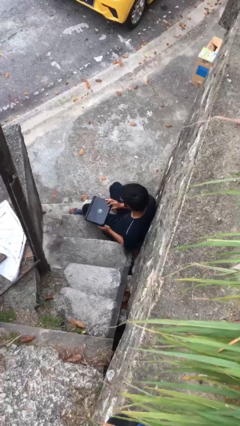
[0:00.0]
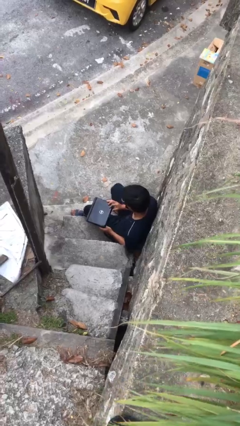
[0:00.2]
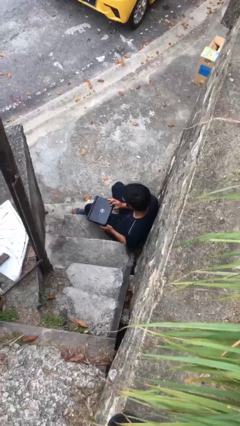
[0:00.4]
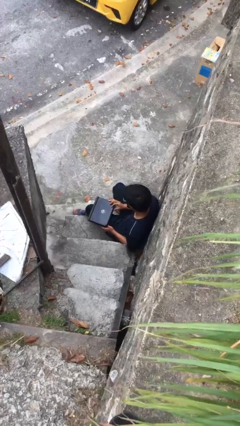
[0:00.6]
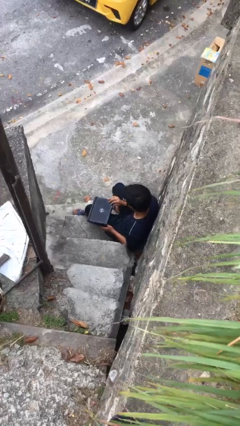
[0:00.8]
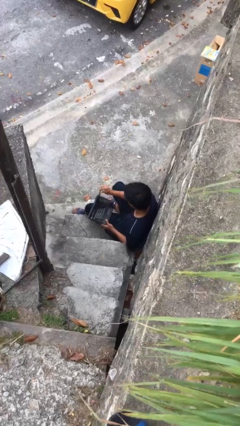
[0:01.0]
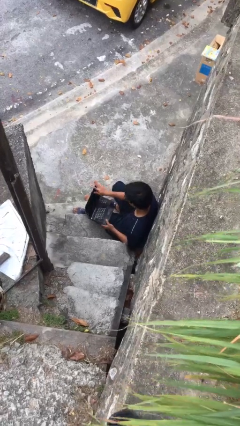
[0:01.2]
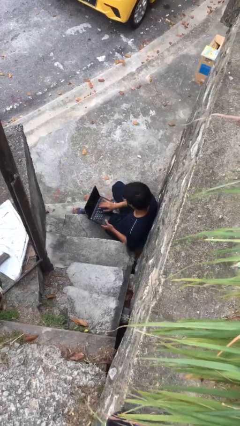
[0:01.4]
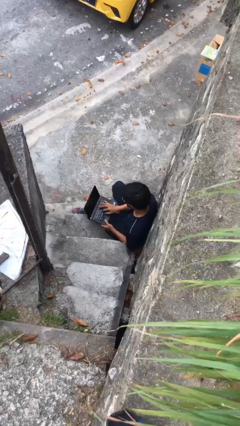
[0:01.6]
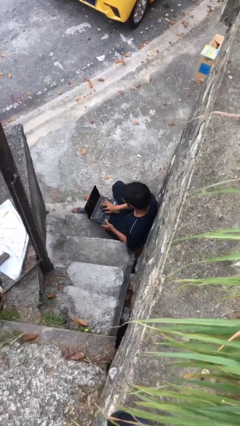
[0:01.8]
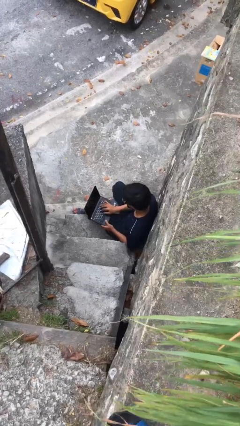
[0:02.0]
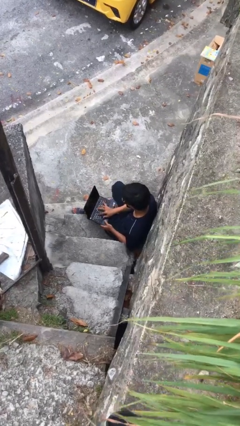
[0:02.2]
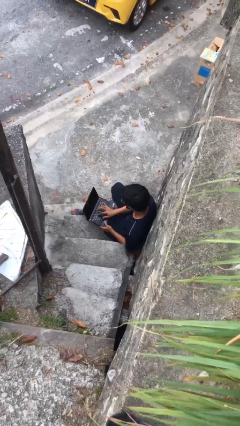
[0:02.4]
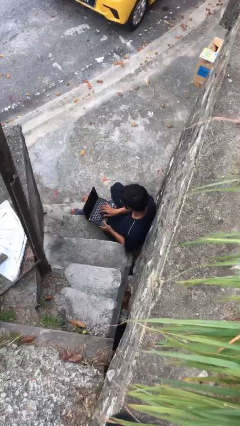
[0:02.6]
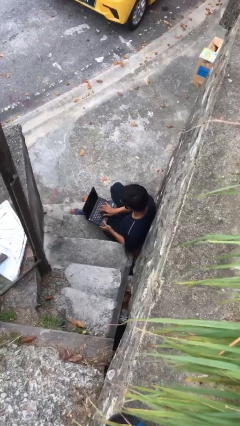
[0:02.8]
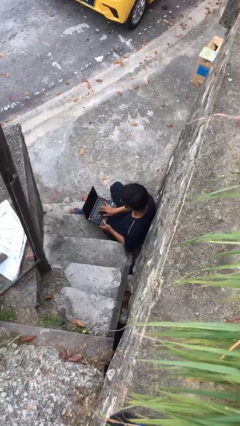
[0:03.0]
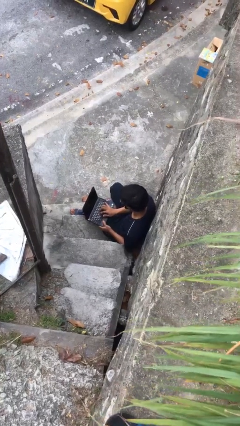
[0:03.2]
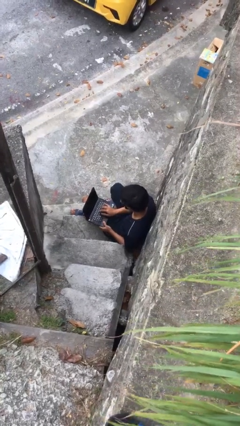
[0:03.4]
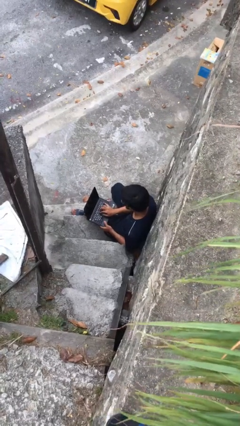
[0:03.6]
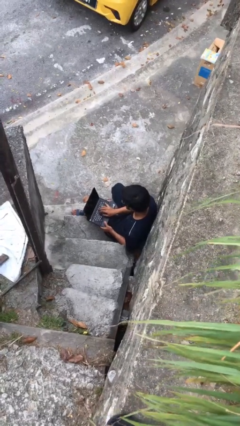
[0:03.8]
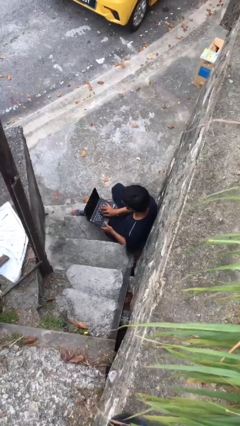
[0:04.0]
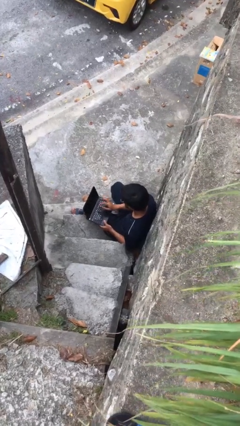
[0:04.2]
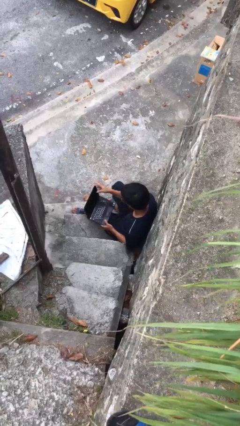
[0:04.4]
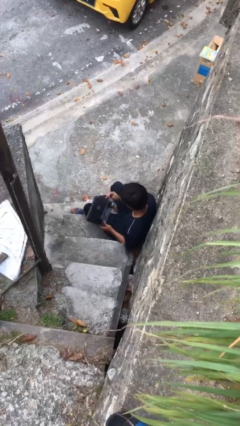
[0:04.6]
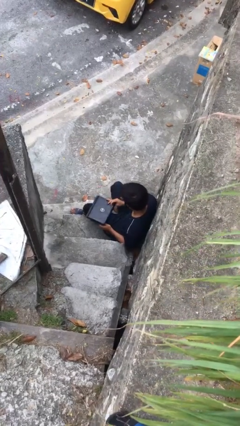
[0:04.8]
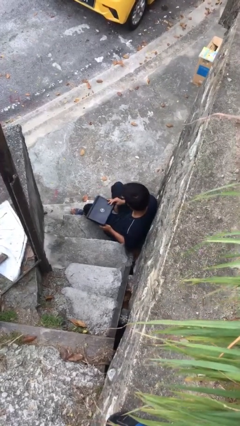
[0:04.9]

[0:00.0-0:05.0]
person interacts with laptop

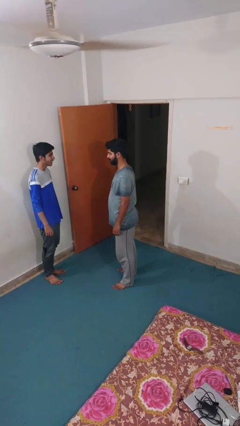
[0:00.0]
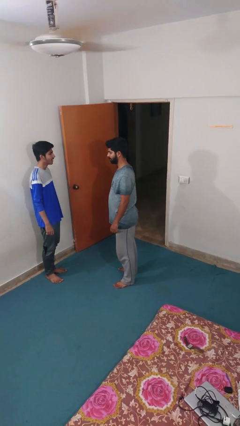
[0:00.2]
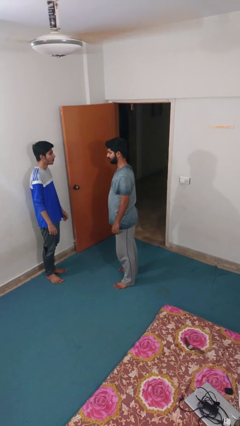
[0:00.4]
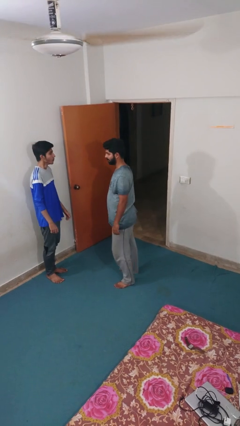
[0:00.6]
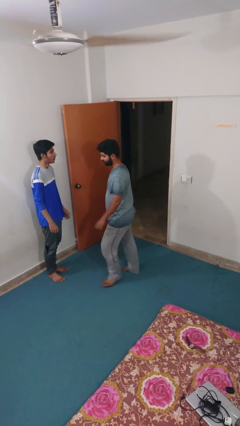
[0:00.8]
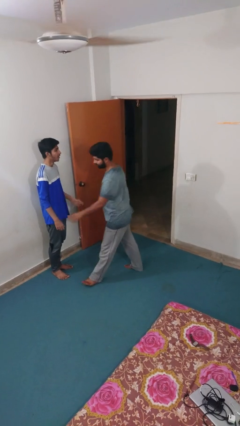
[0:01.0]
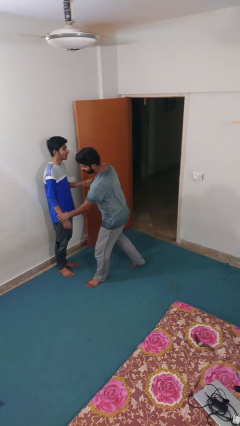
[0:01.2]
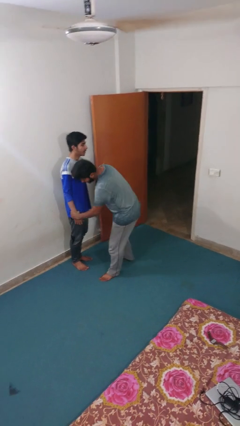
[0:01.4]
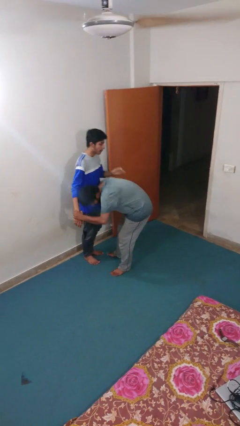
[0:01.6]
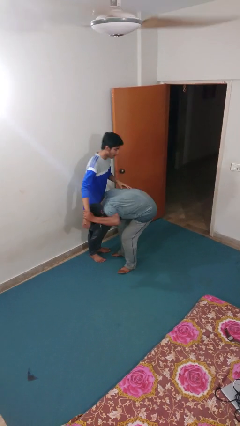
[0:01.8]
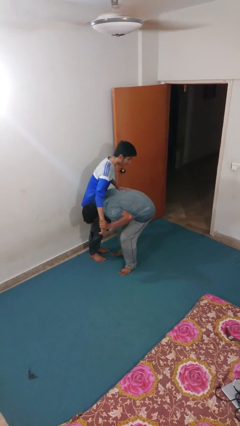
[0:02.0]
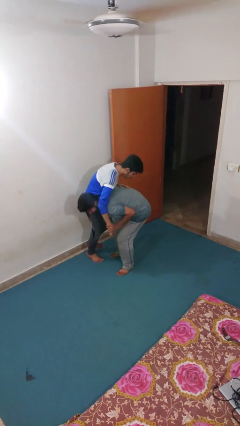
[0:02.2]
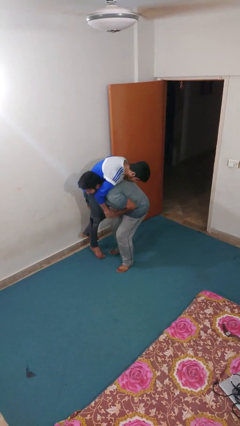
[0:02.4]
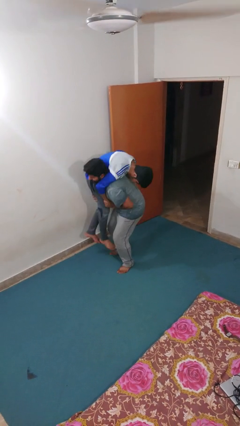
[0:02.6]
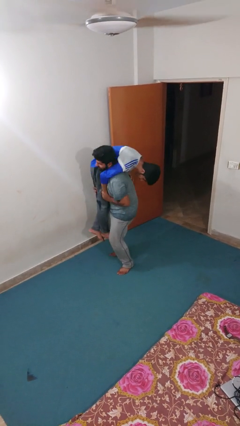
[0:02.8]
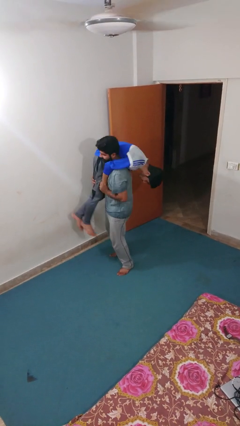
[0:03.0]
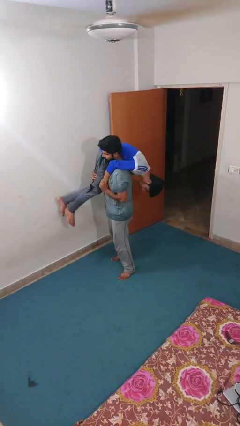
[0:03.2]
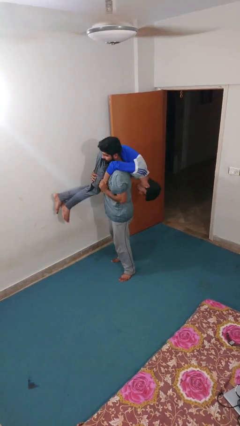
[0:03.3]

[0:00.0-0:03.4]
person carries person over shoulder

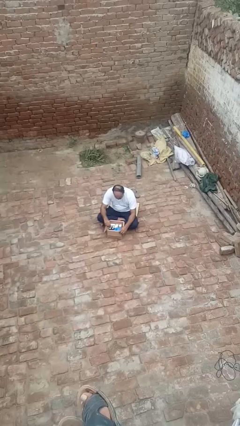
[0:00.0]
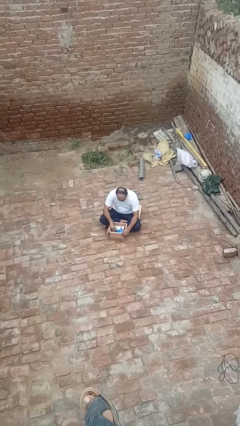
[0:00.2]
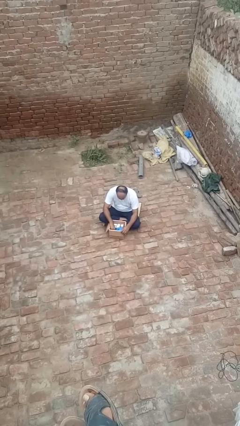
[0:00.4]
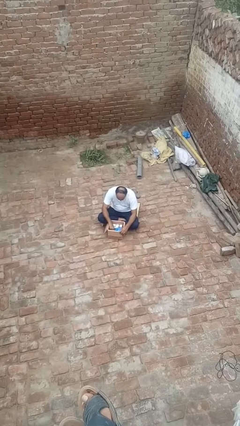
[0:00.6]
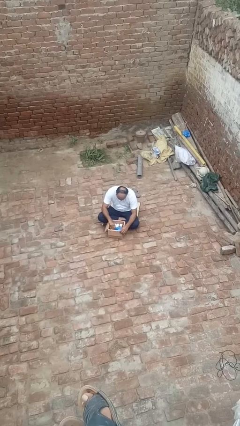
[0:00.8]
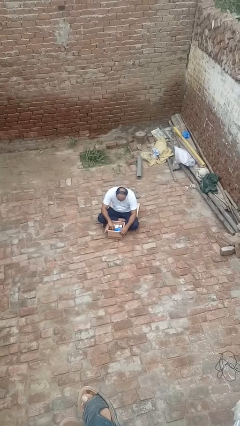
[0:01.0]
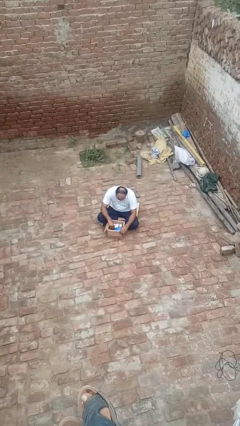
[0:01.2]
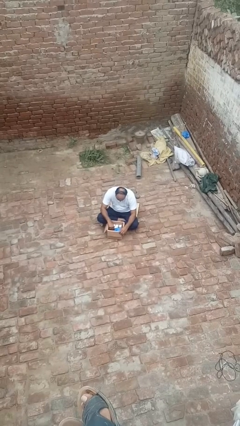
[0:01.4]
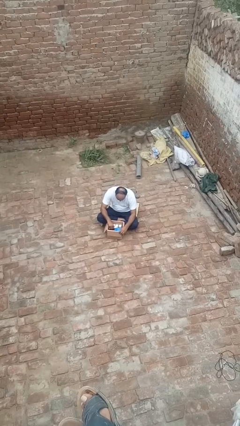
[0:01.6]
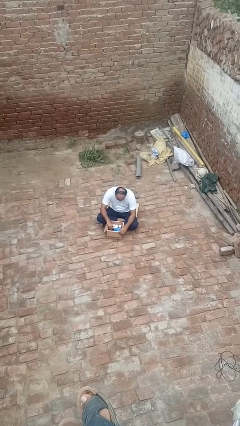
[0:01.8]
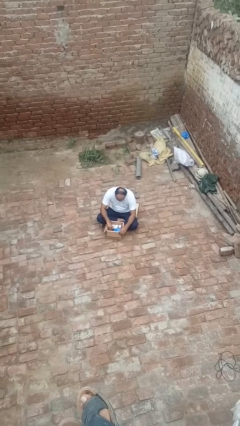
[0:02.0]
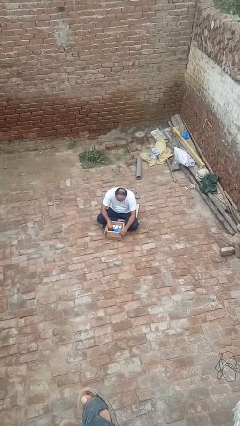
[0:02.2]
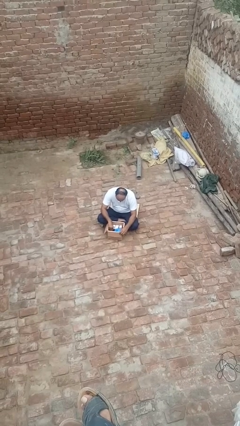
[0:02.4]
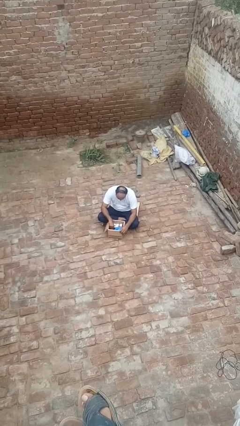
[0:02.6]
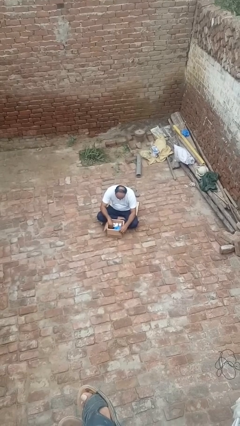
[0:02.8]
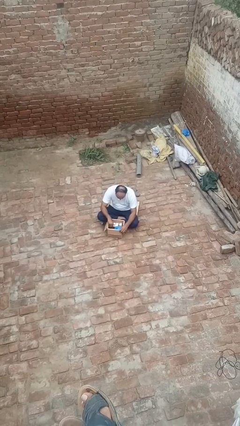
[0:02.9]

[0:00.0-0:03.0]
person searches in box

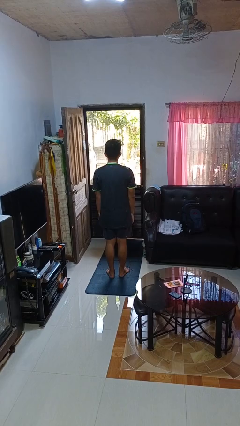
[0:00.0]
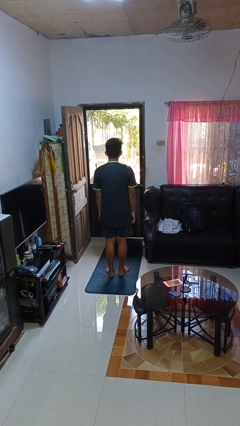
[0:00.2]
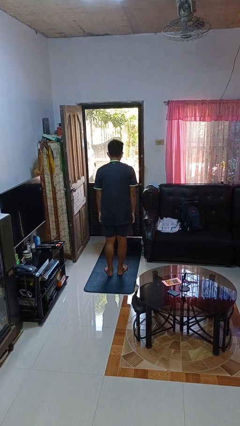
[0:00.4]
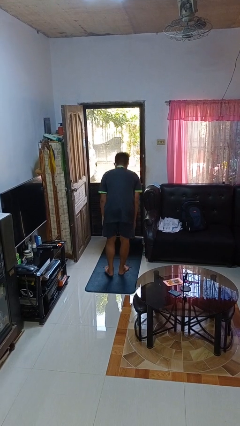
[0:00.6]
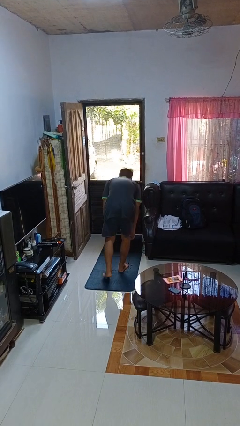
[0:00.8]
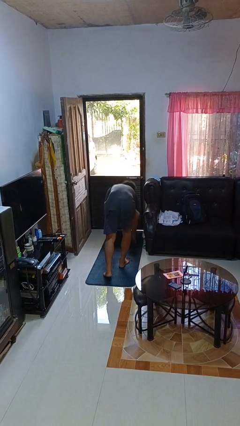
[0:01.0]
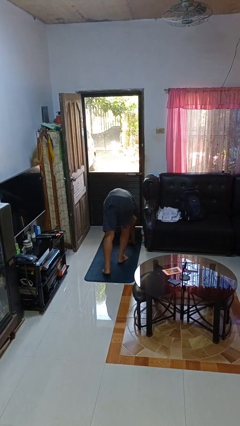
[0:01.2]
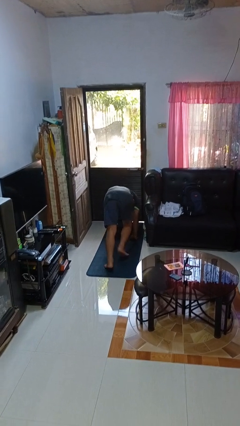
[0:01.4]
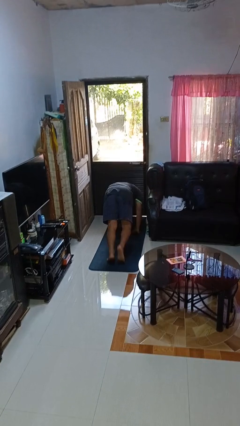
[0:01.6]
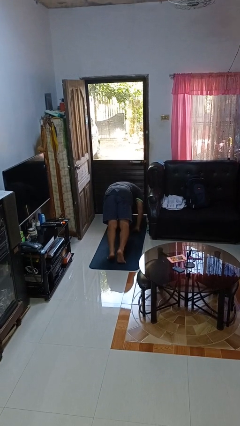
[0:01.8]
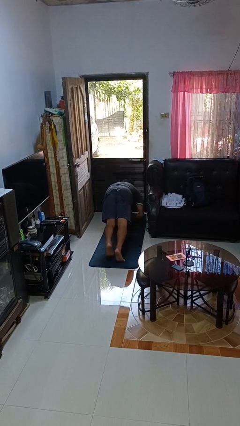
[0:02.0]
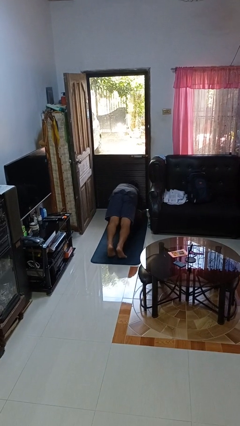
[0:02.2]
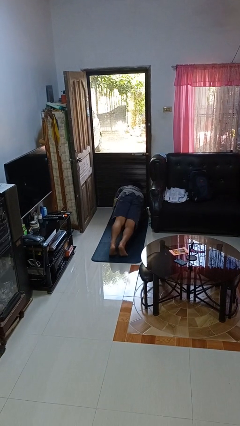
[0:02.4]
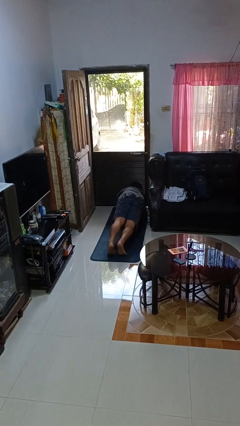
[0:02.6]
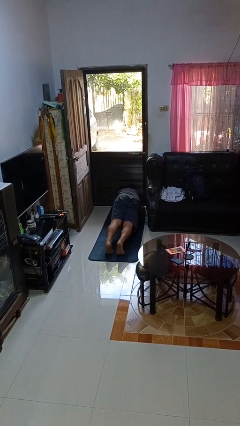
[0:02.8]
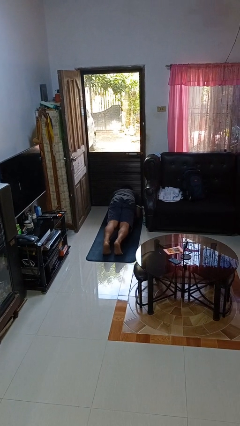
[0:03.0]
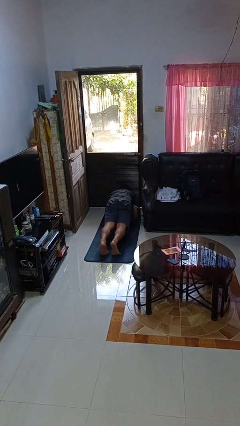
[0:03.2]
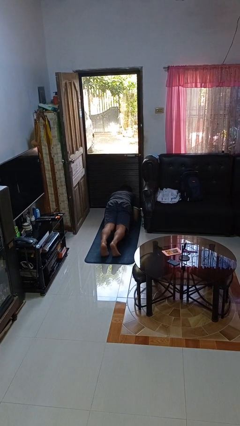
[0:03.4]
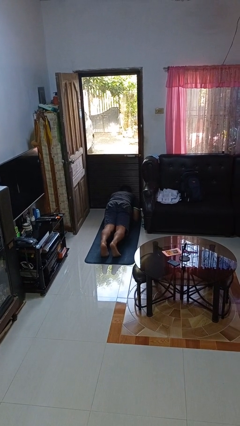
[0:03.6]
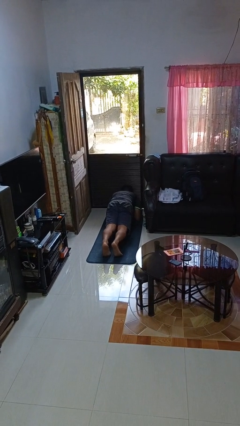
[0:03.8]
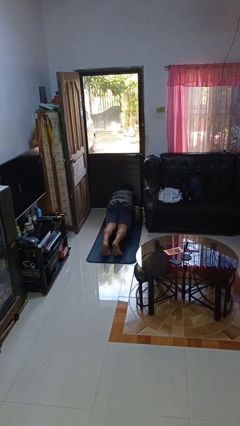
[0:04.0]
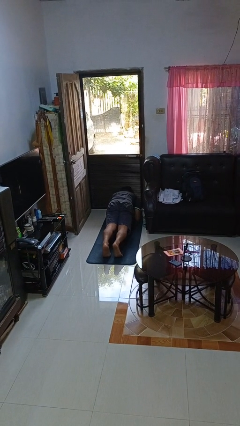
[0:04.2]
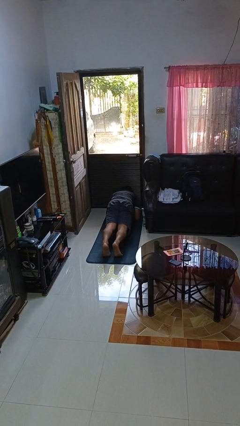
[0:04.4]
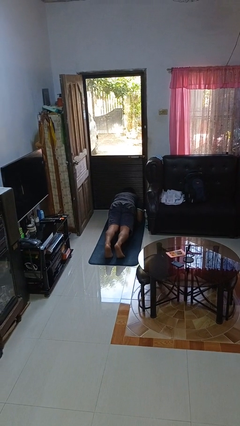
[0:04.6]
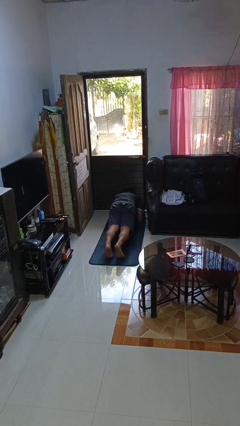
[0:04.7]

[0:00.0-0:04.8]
person exercises with plank

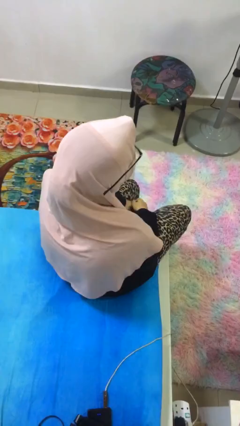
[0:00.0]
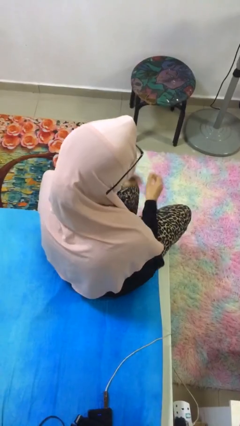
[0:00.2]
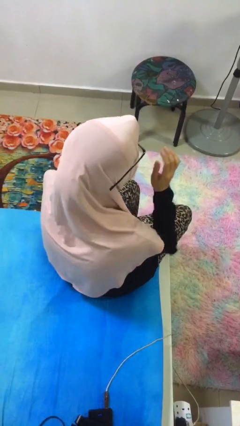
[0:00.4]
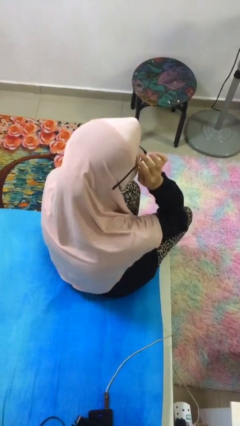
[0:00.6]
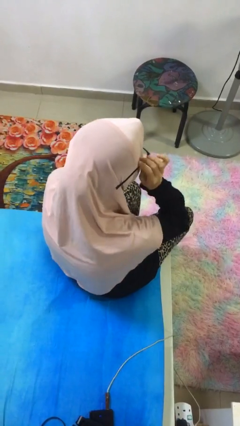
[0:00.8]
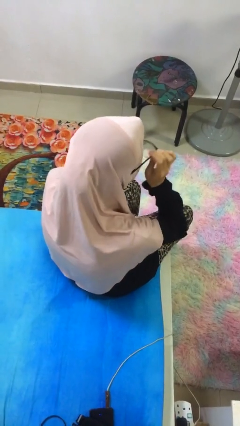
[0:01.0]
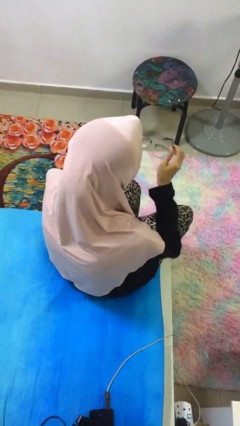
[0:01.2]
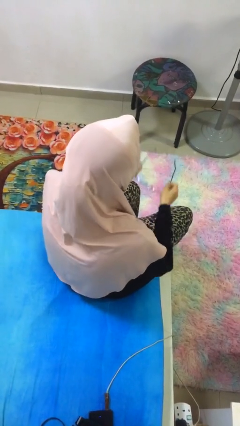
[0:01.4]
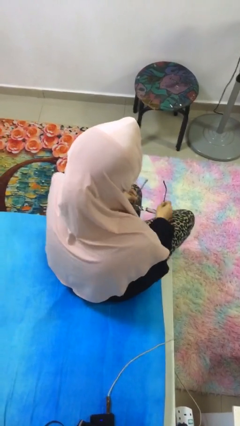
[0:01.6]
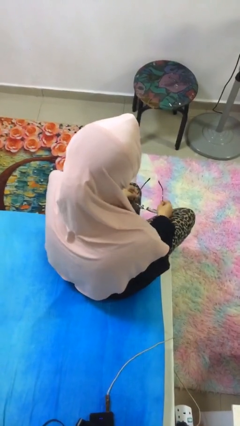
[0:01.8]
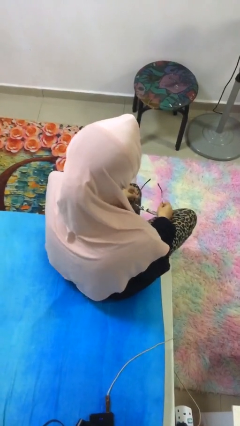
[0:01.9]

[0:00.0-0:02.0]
person takes off glasses
